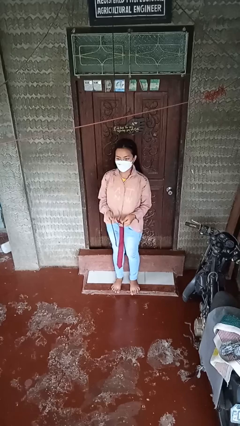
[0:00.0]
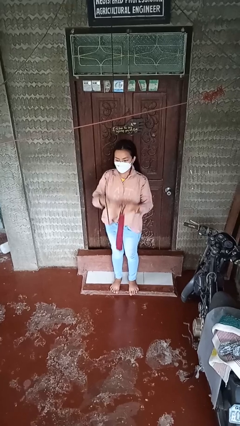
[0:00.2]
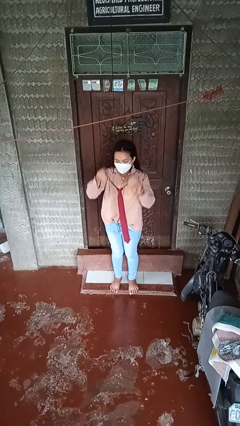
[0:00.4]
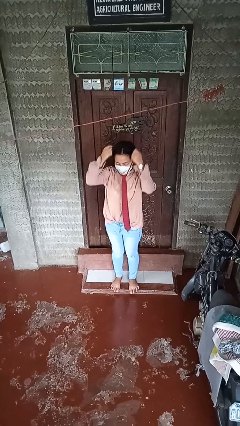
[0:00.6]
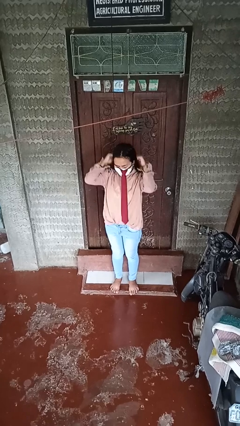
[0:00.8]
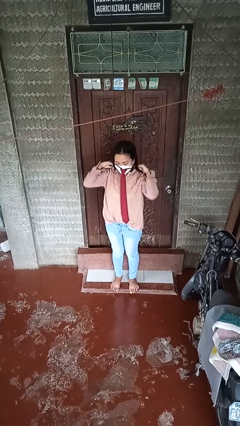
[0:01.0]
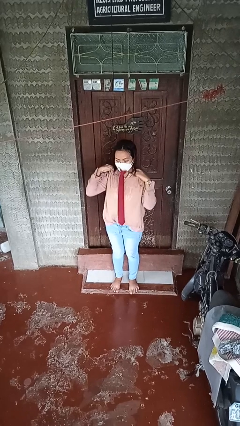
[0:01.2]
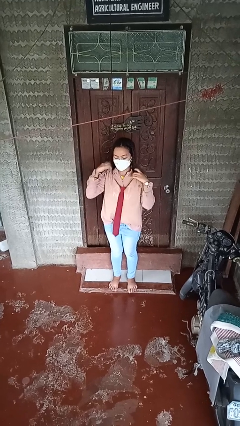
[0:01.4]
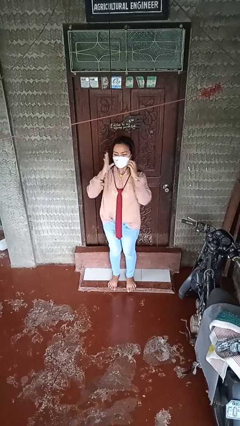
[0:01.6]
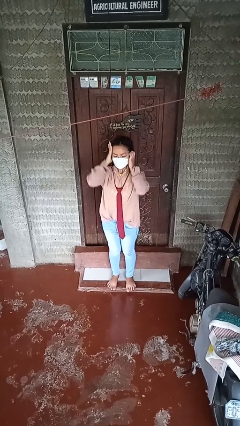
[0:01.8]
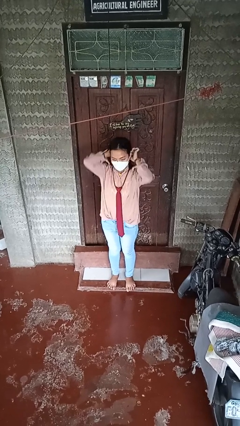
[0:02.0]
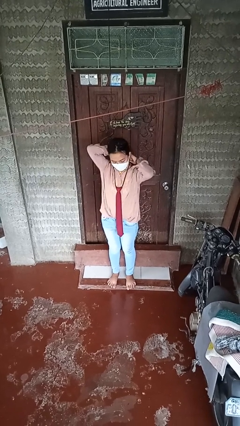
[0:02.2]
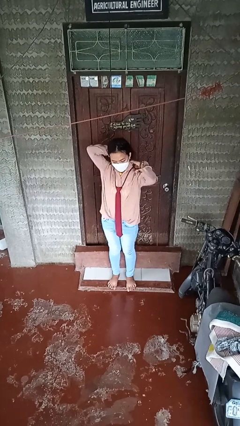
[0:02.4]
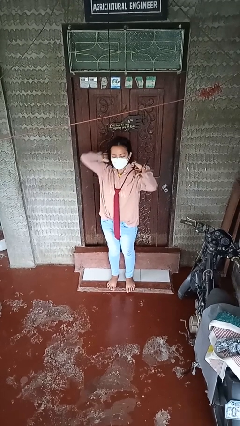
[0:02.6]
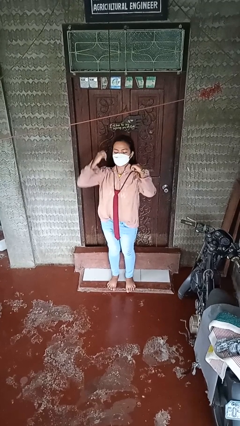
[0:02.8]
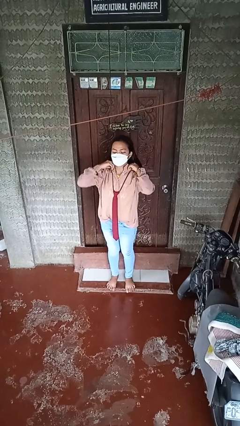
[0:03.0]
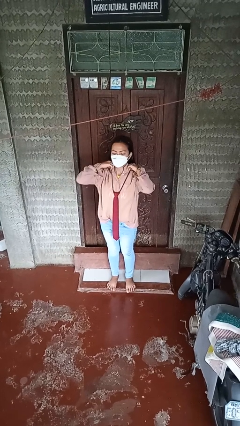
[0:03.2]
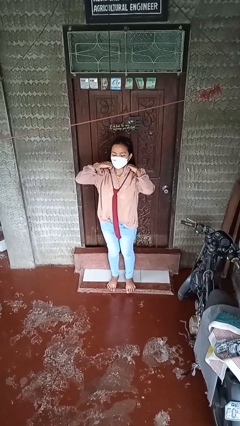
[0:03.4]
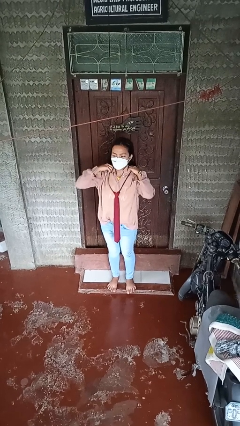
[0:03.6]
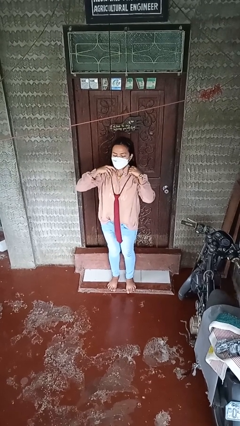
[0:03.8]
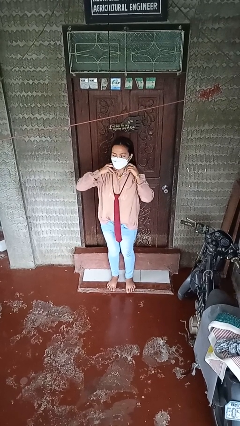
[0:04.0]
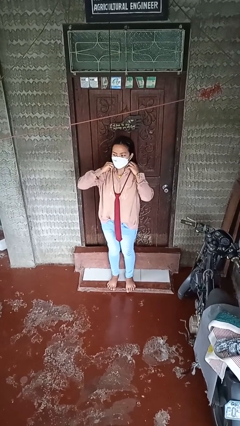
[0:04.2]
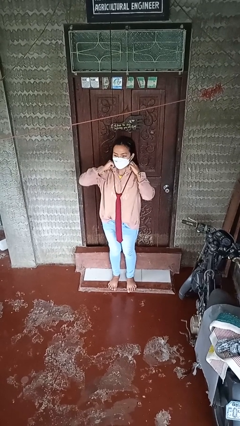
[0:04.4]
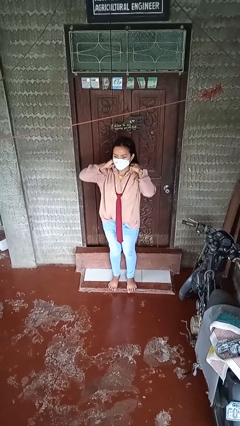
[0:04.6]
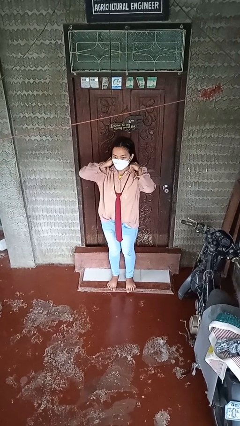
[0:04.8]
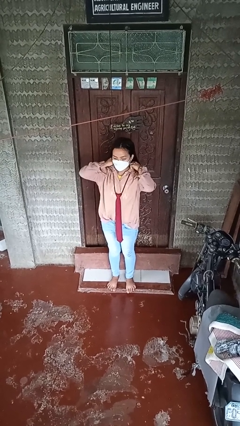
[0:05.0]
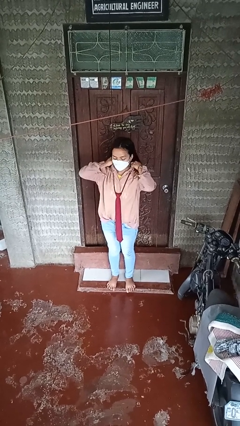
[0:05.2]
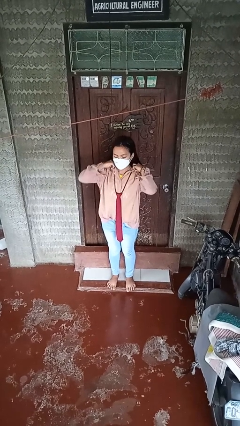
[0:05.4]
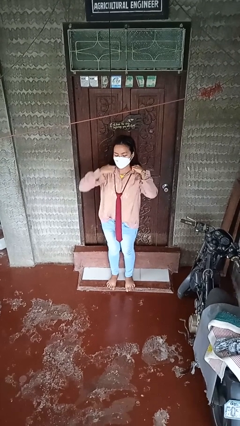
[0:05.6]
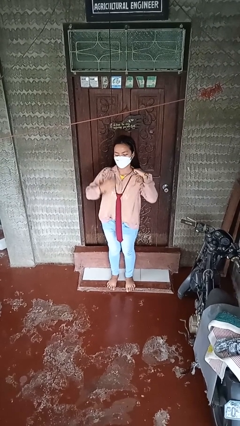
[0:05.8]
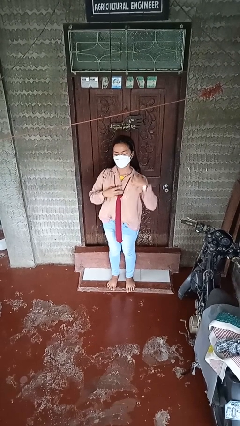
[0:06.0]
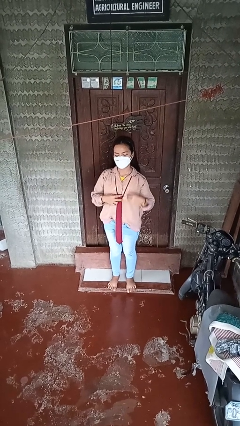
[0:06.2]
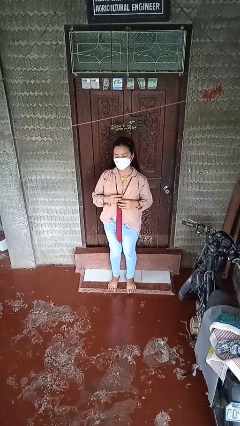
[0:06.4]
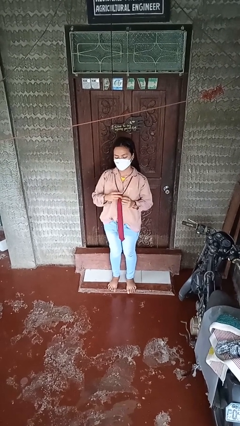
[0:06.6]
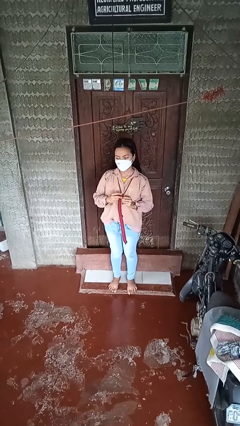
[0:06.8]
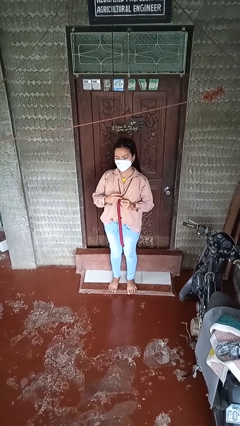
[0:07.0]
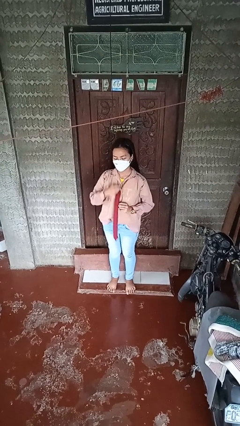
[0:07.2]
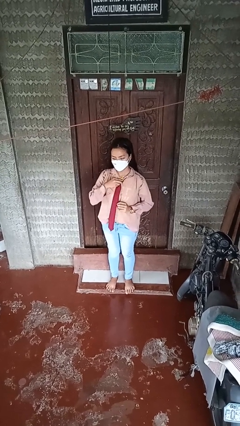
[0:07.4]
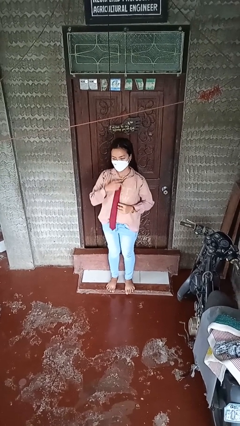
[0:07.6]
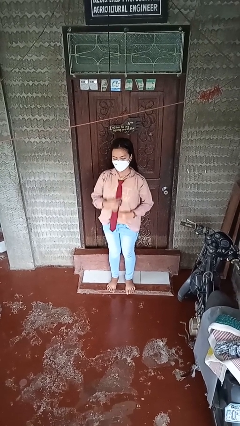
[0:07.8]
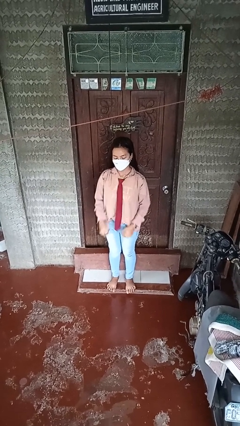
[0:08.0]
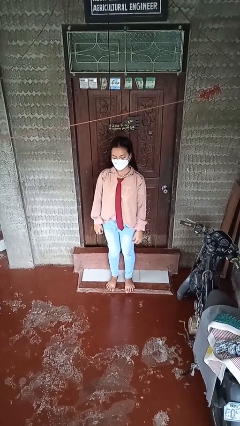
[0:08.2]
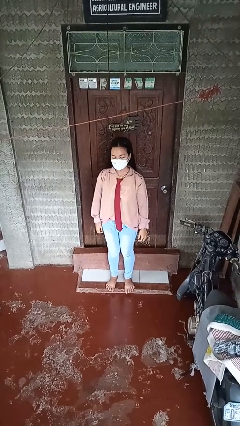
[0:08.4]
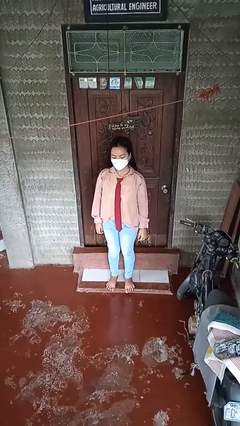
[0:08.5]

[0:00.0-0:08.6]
person puts on necktie

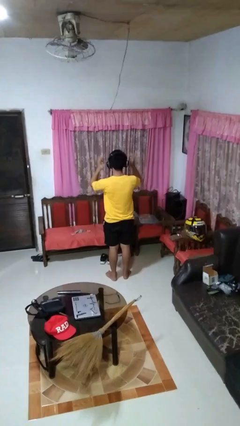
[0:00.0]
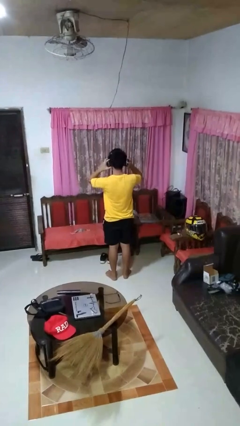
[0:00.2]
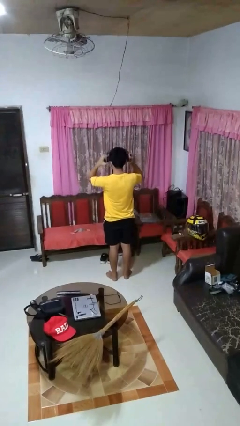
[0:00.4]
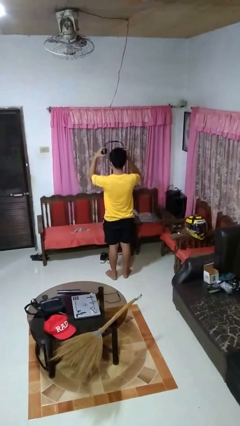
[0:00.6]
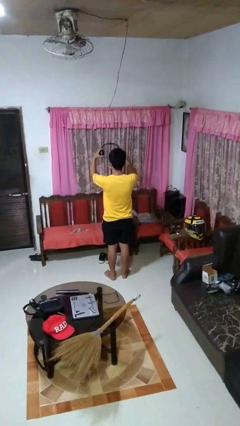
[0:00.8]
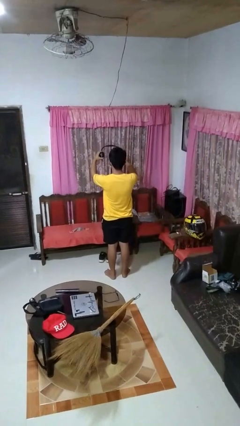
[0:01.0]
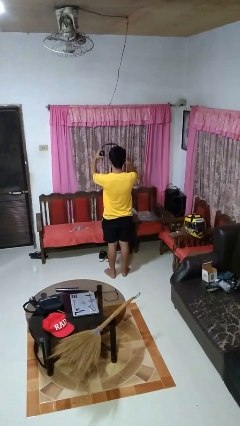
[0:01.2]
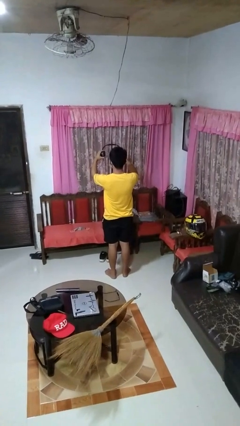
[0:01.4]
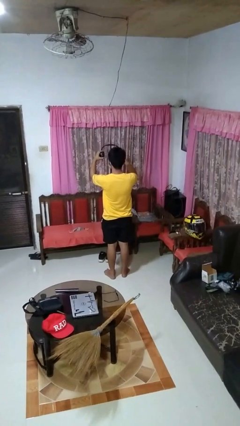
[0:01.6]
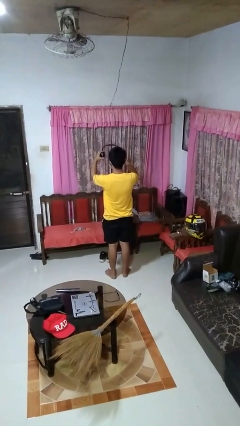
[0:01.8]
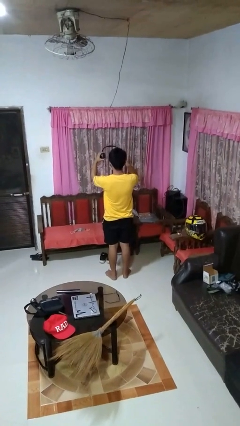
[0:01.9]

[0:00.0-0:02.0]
person takes off headphones

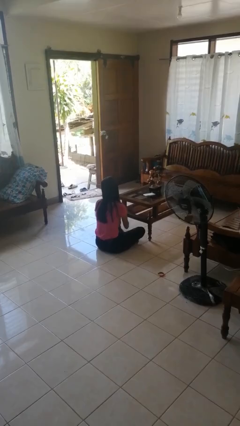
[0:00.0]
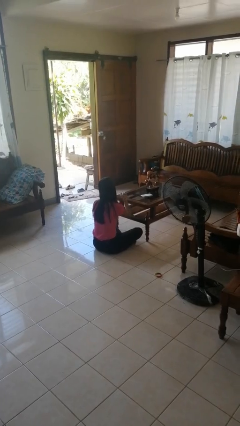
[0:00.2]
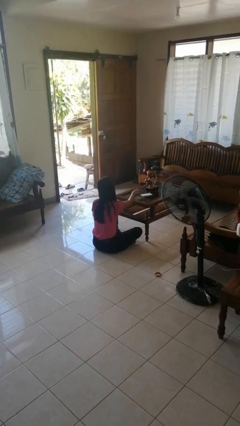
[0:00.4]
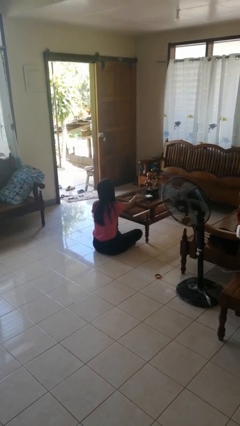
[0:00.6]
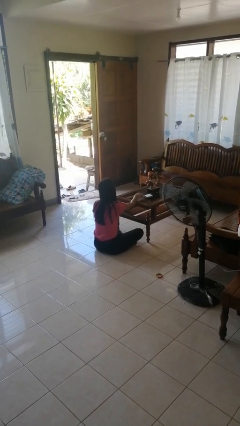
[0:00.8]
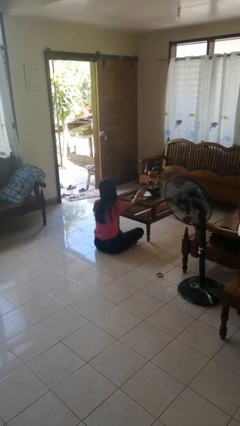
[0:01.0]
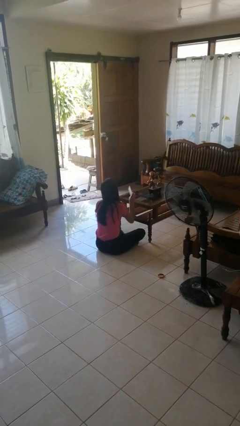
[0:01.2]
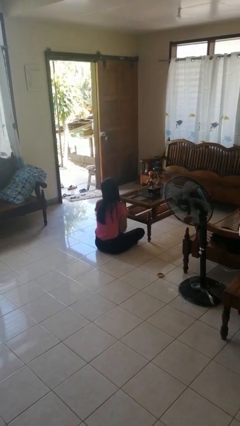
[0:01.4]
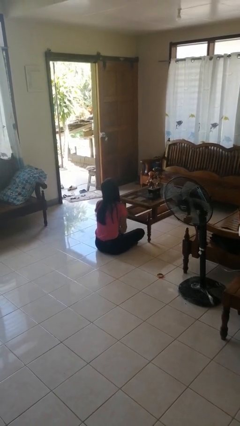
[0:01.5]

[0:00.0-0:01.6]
person picks up object from table

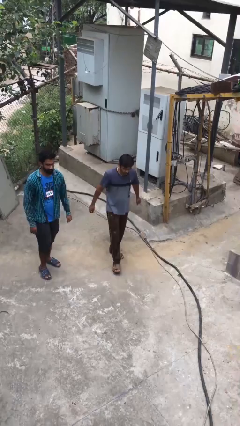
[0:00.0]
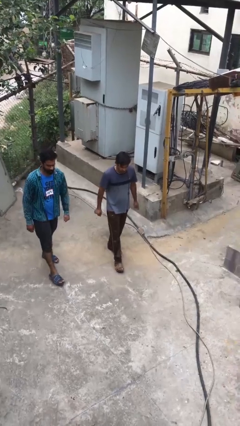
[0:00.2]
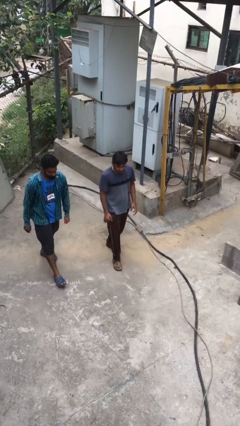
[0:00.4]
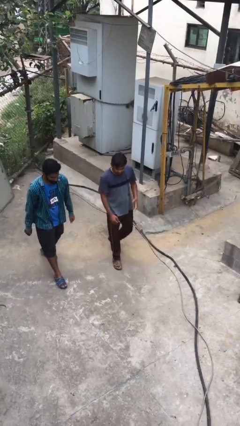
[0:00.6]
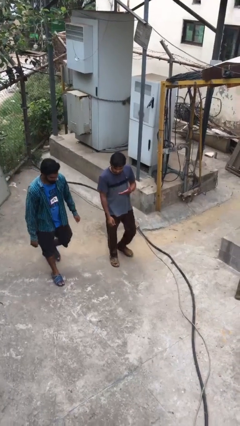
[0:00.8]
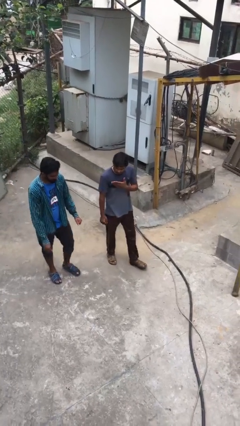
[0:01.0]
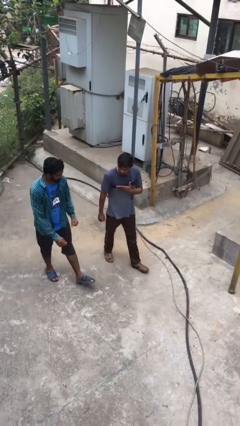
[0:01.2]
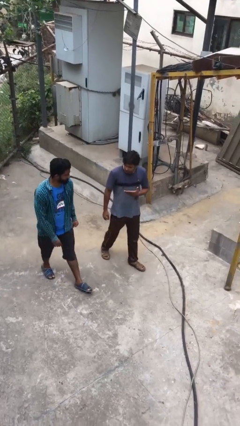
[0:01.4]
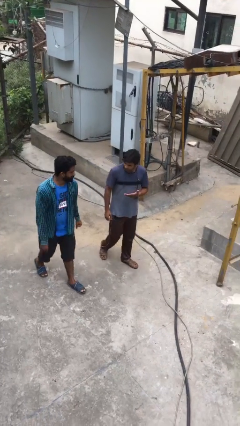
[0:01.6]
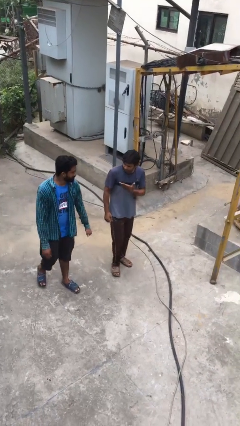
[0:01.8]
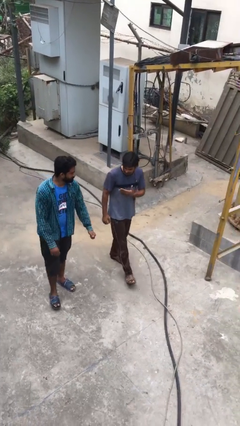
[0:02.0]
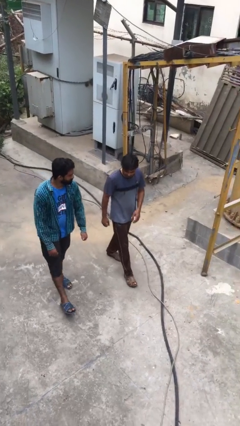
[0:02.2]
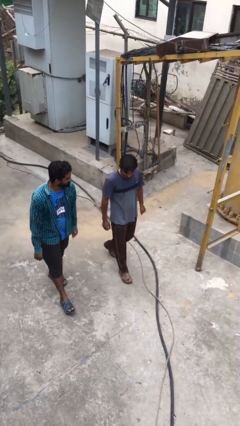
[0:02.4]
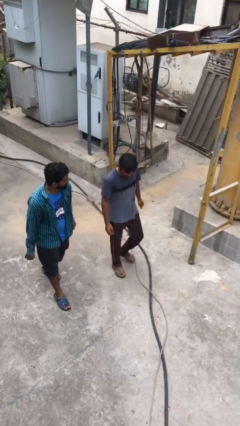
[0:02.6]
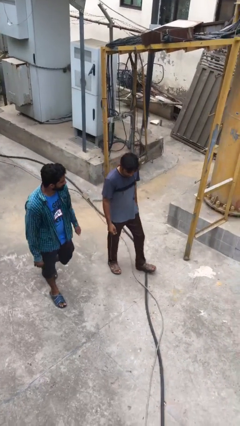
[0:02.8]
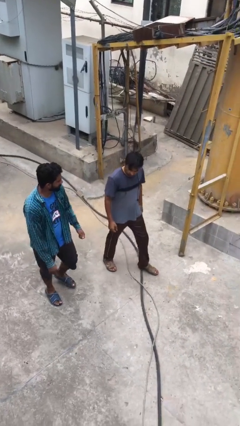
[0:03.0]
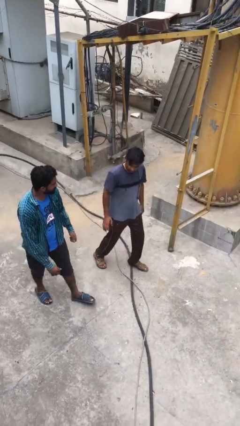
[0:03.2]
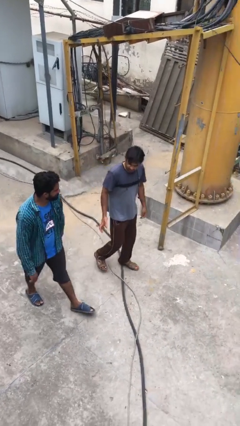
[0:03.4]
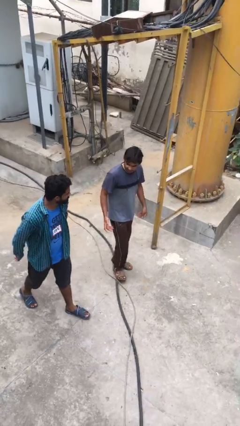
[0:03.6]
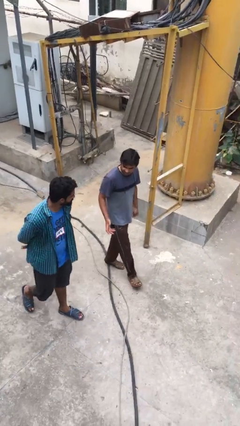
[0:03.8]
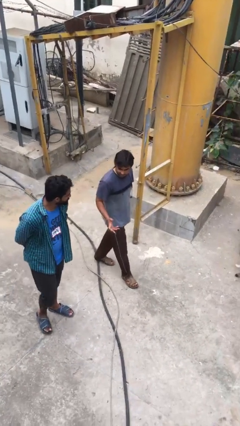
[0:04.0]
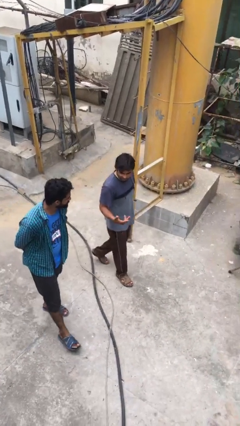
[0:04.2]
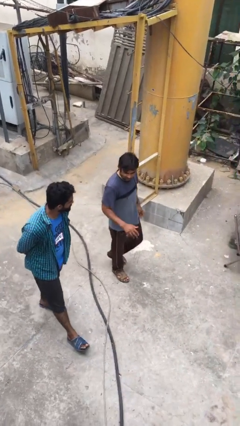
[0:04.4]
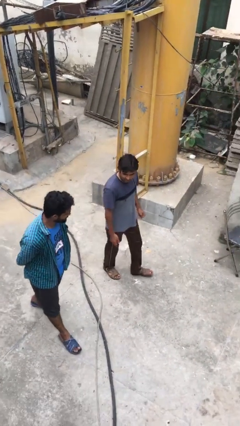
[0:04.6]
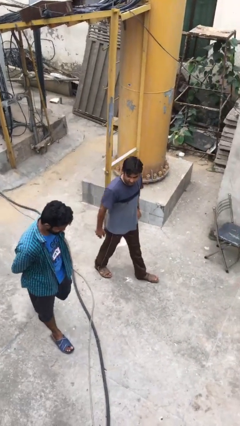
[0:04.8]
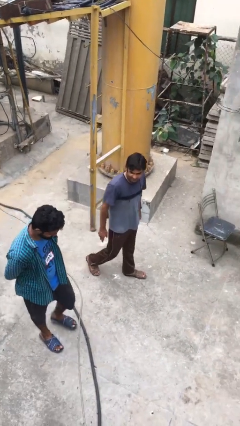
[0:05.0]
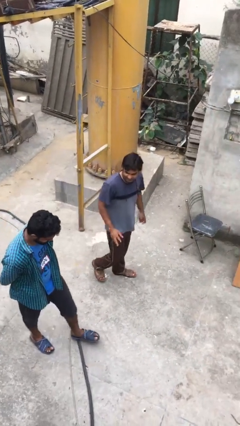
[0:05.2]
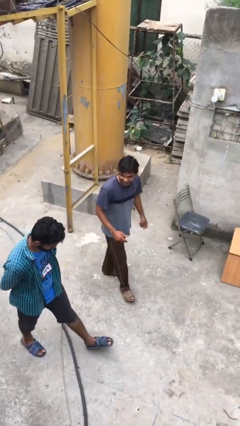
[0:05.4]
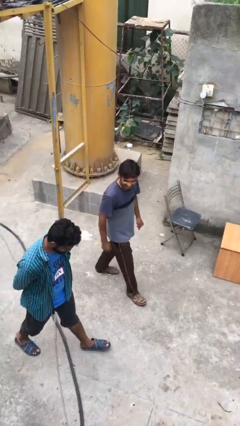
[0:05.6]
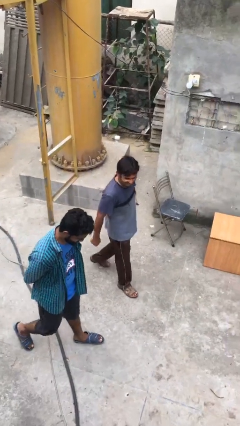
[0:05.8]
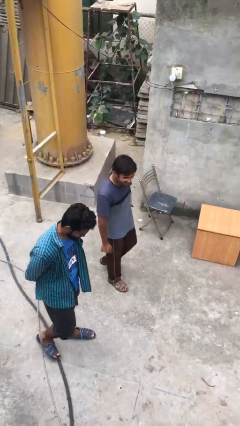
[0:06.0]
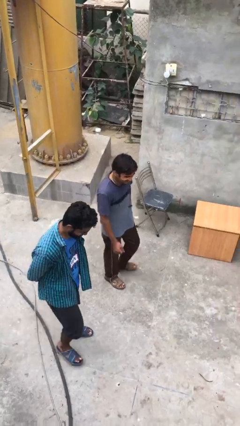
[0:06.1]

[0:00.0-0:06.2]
person talks to person
